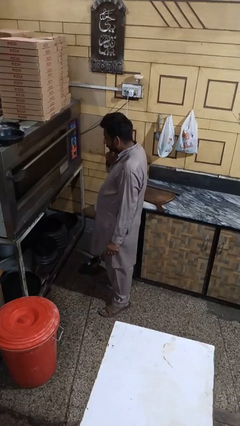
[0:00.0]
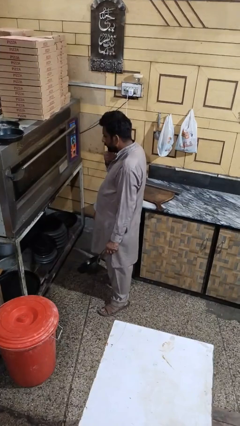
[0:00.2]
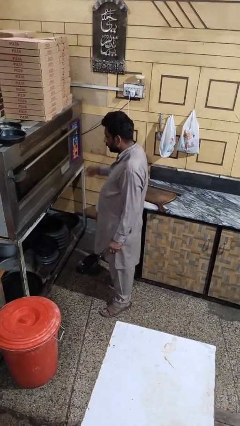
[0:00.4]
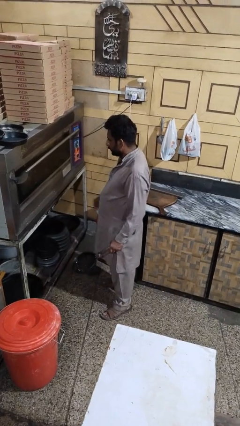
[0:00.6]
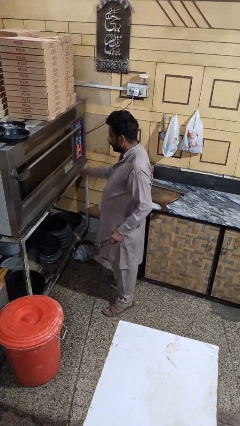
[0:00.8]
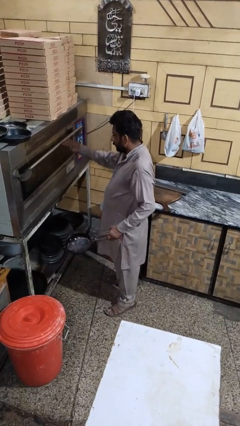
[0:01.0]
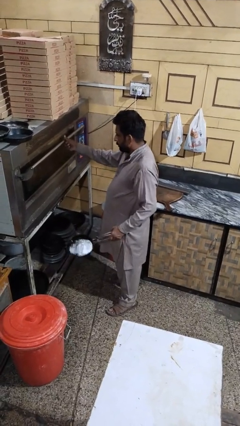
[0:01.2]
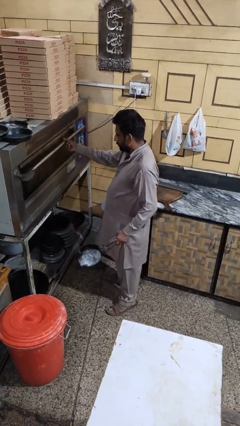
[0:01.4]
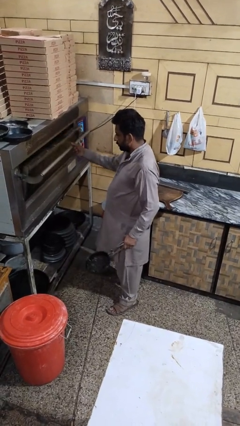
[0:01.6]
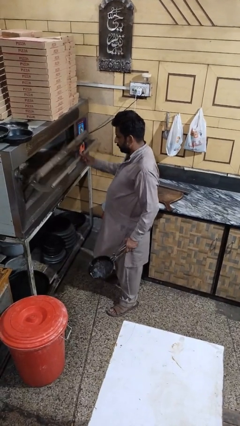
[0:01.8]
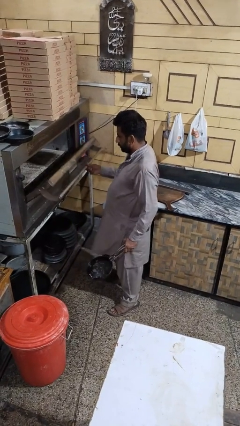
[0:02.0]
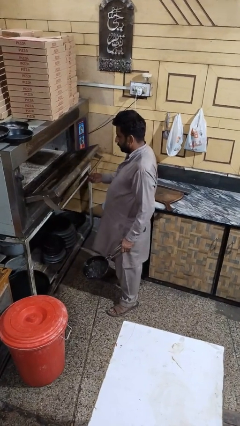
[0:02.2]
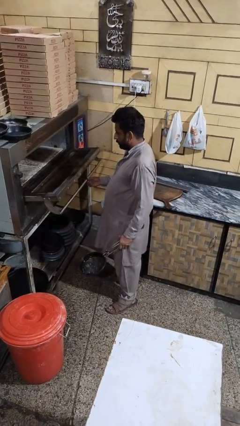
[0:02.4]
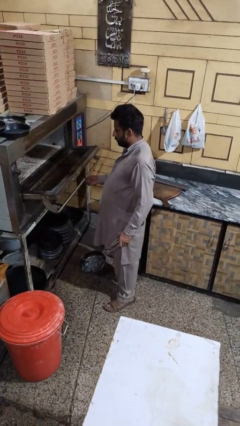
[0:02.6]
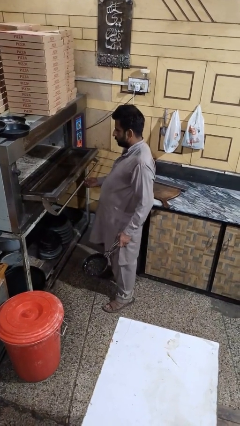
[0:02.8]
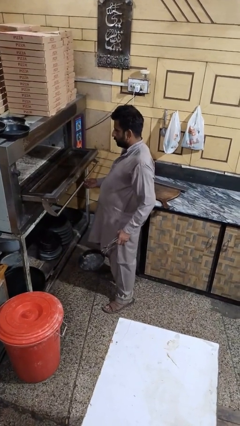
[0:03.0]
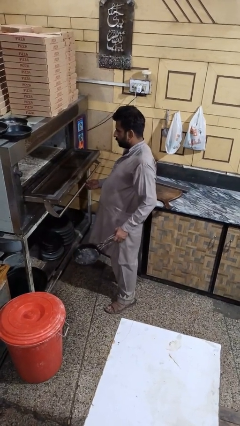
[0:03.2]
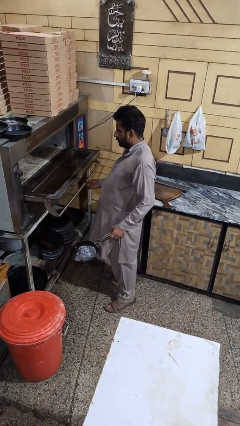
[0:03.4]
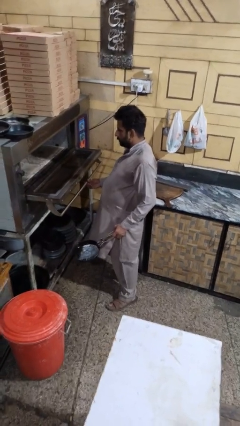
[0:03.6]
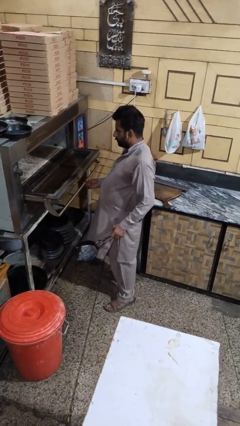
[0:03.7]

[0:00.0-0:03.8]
person opens microwave

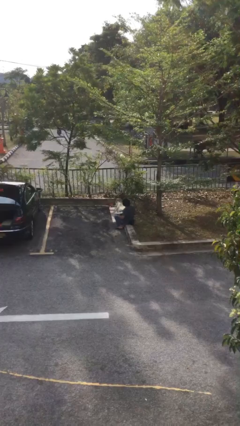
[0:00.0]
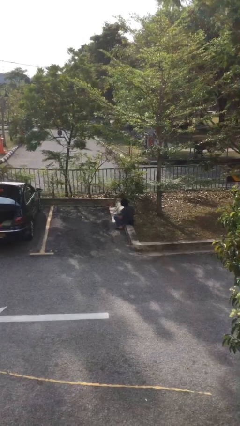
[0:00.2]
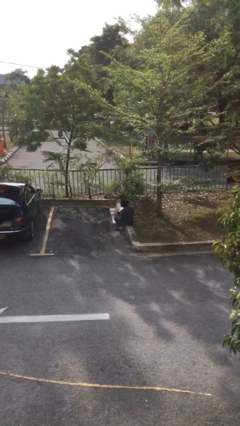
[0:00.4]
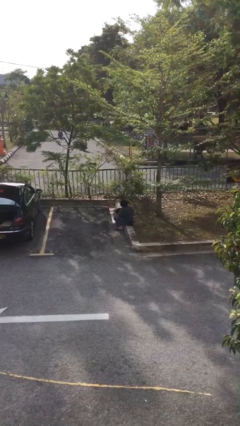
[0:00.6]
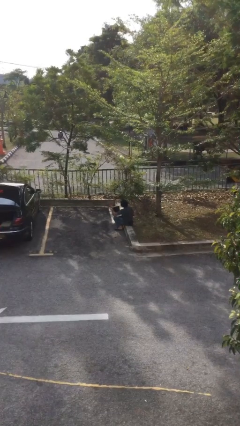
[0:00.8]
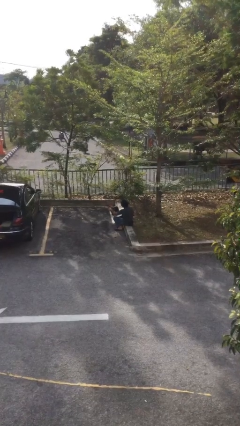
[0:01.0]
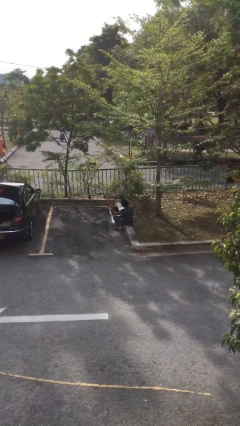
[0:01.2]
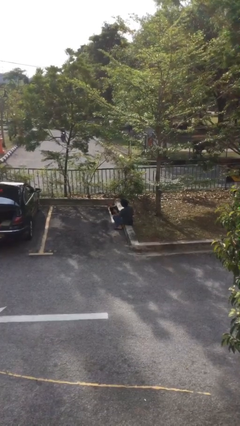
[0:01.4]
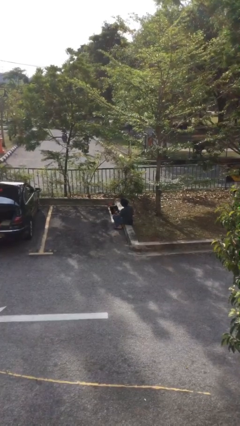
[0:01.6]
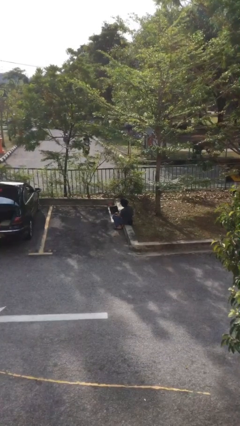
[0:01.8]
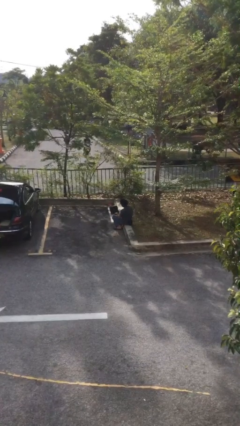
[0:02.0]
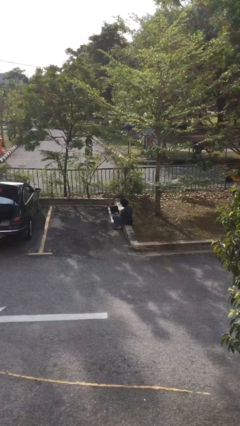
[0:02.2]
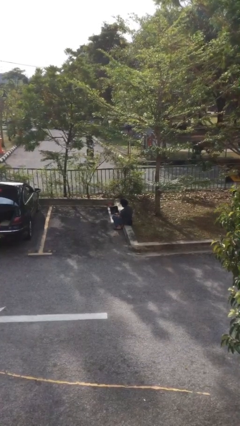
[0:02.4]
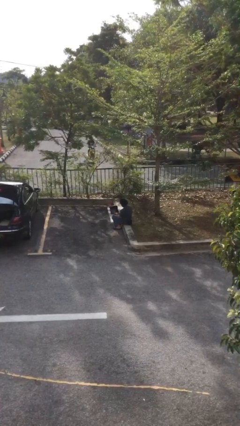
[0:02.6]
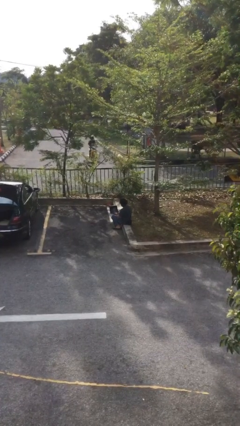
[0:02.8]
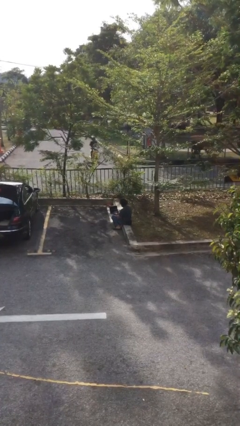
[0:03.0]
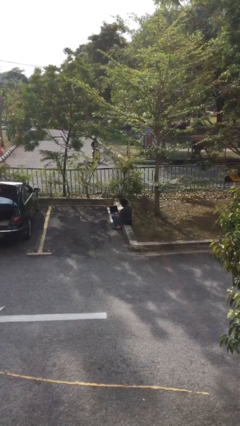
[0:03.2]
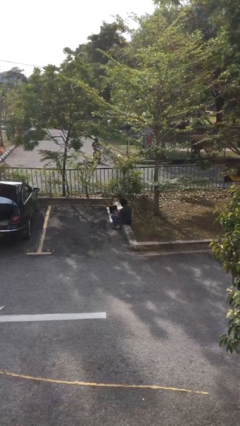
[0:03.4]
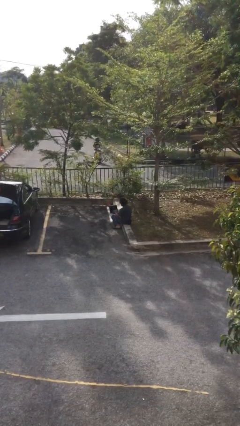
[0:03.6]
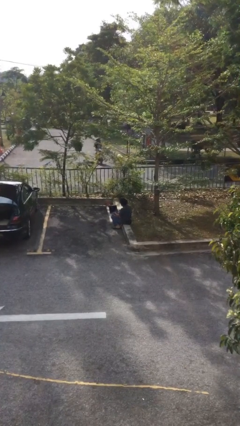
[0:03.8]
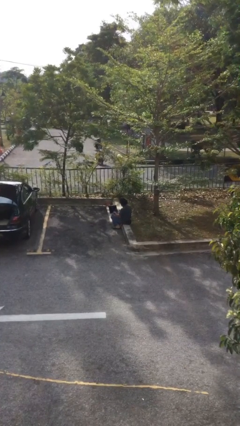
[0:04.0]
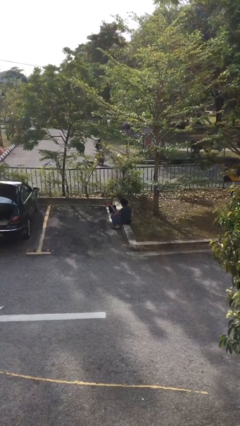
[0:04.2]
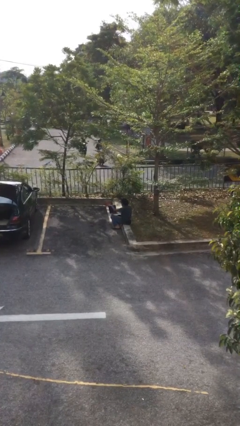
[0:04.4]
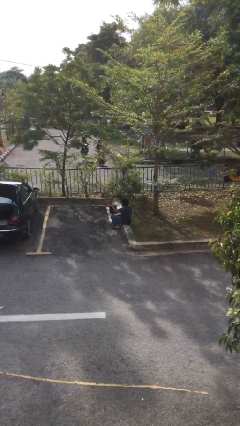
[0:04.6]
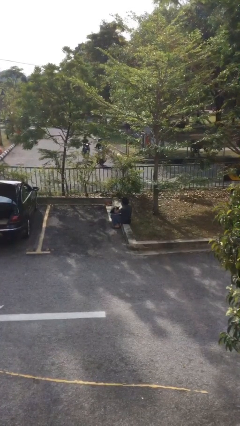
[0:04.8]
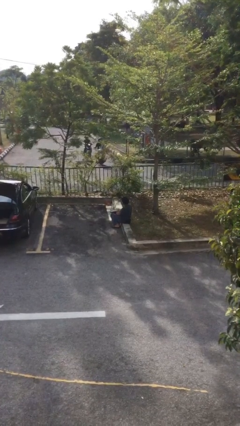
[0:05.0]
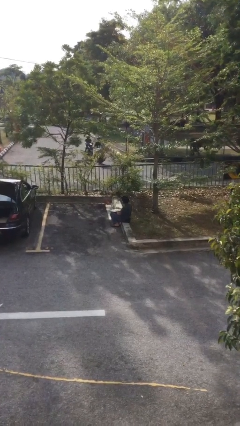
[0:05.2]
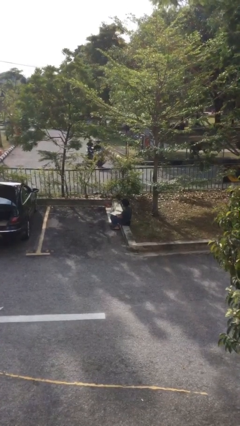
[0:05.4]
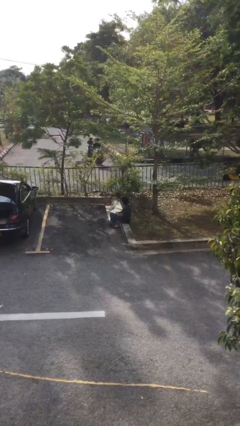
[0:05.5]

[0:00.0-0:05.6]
person interacts with laptop

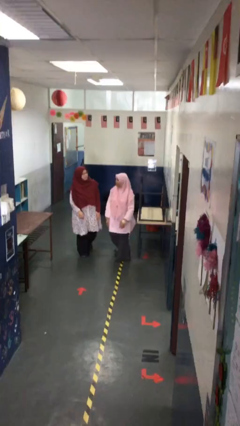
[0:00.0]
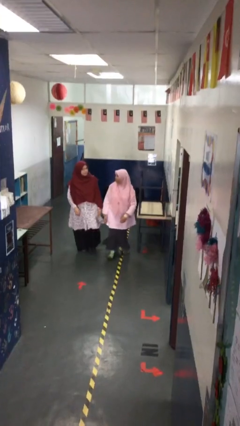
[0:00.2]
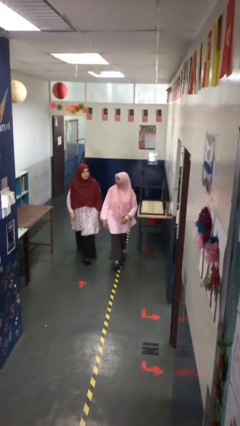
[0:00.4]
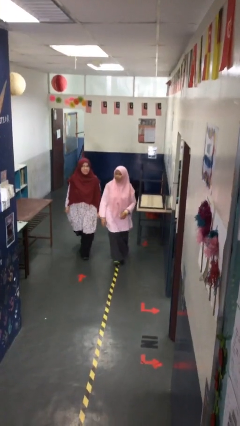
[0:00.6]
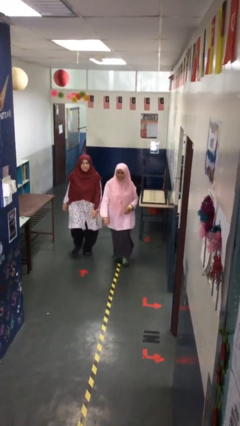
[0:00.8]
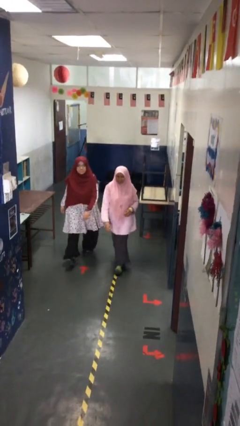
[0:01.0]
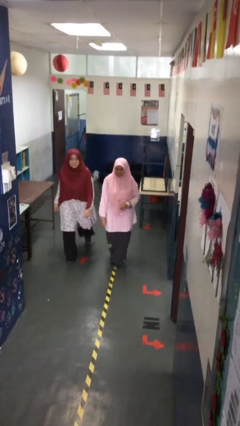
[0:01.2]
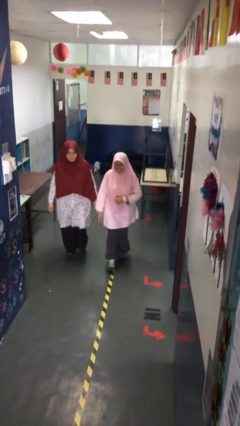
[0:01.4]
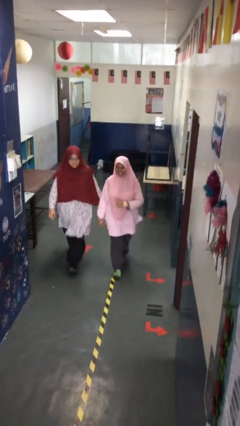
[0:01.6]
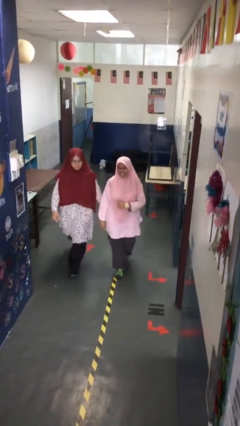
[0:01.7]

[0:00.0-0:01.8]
person talks to person

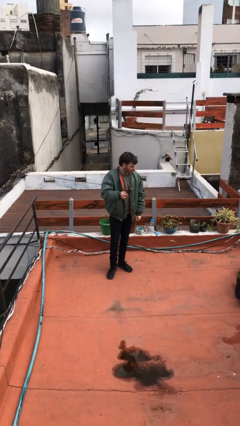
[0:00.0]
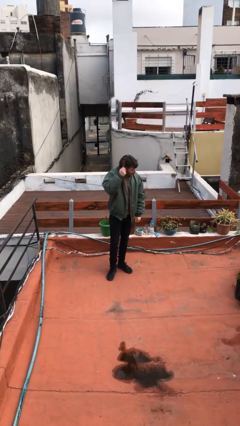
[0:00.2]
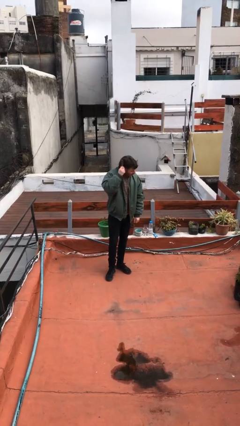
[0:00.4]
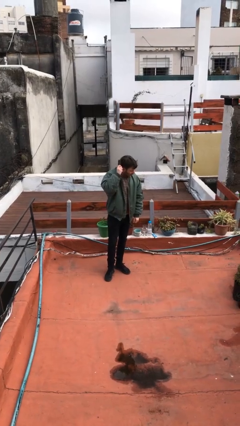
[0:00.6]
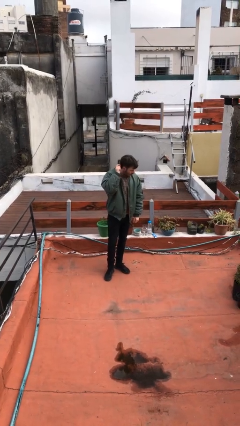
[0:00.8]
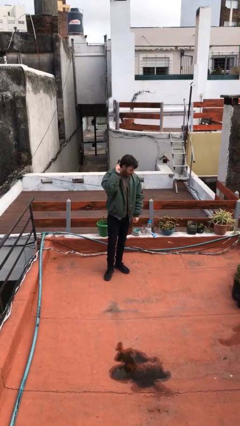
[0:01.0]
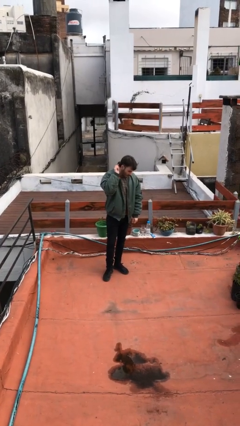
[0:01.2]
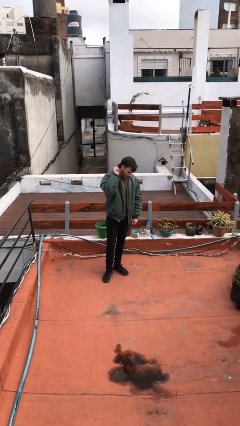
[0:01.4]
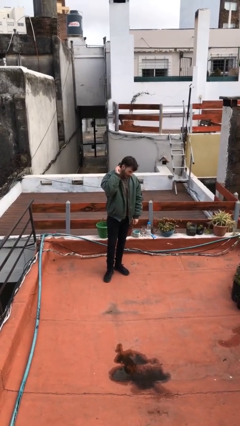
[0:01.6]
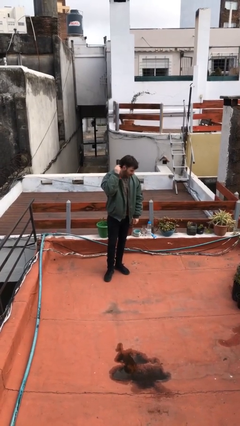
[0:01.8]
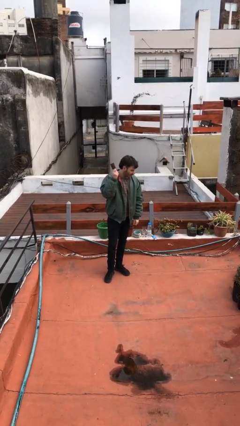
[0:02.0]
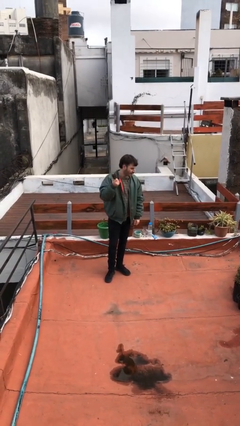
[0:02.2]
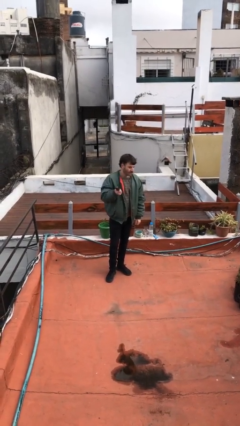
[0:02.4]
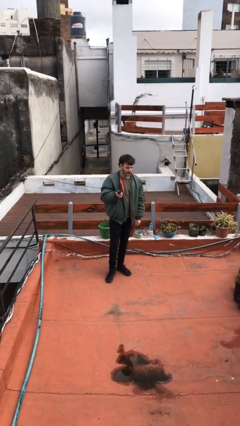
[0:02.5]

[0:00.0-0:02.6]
person brushes hair

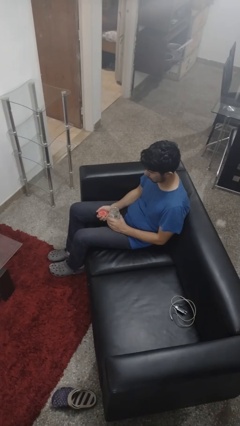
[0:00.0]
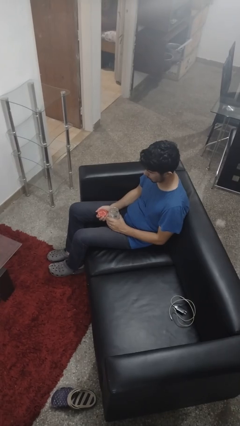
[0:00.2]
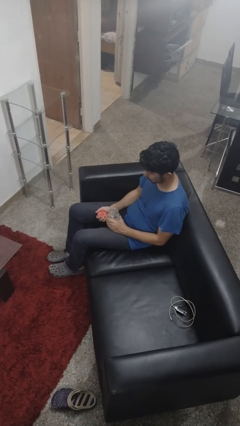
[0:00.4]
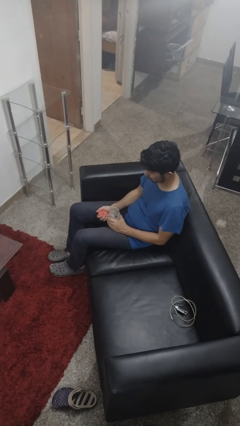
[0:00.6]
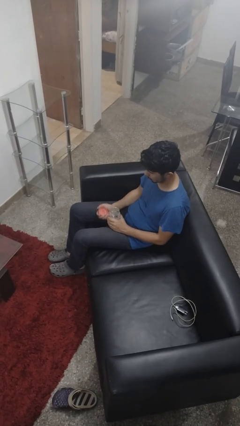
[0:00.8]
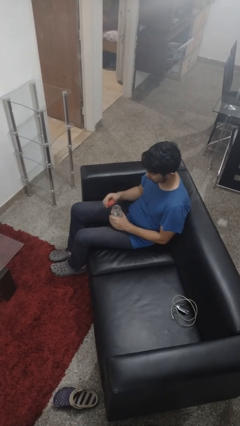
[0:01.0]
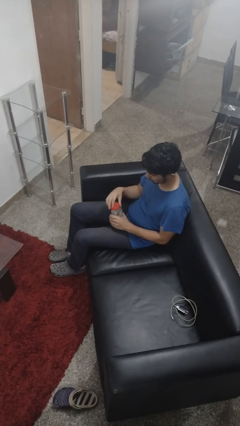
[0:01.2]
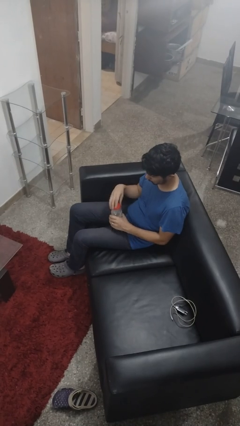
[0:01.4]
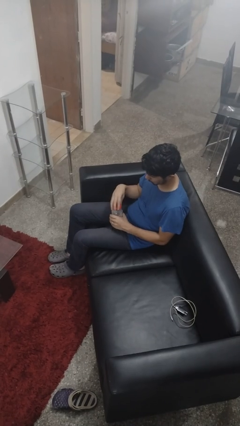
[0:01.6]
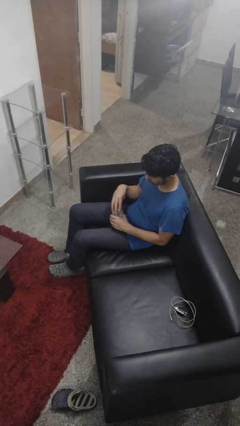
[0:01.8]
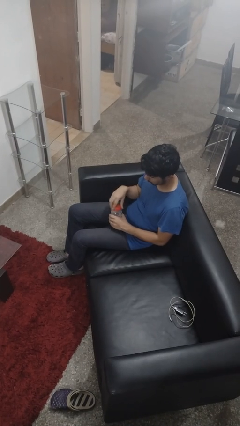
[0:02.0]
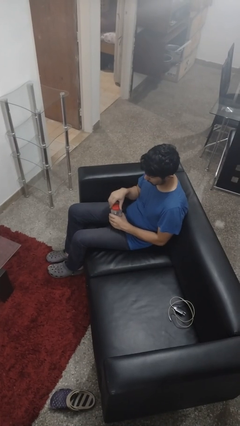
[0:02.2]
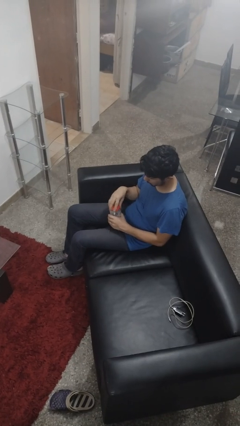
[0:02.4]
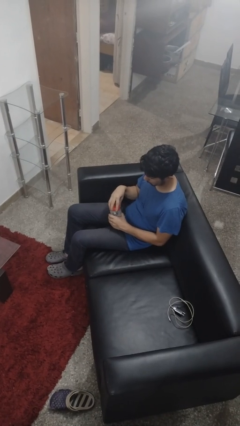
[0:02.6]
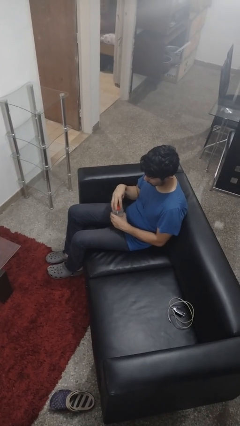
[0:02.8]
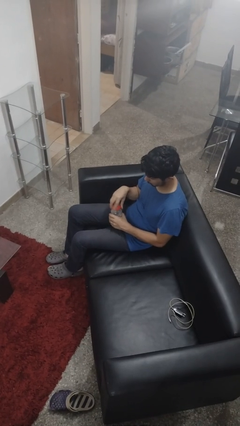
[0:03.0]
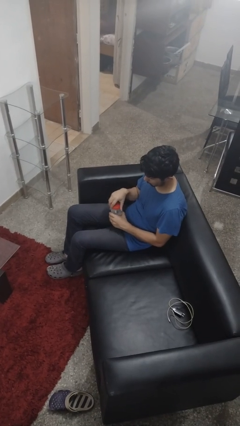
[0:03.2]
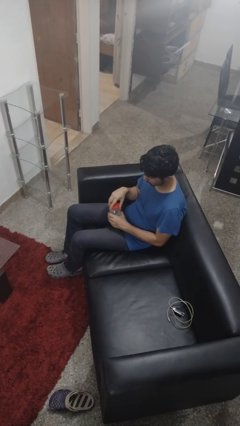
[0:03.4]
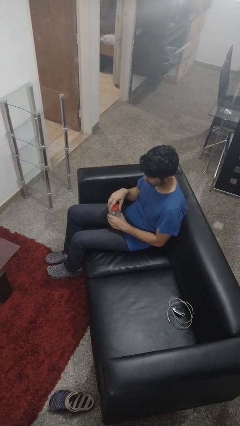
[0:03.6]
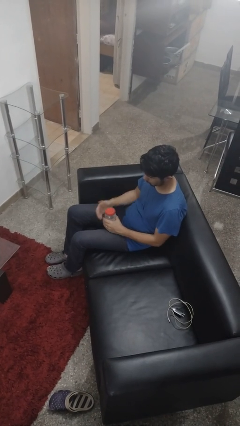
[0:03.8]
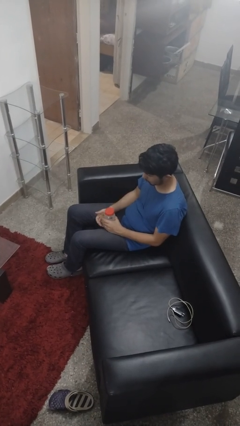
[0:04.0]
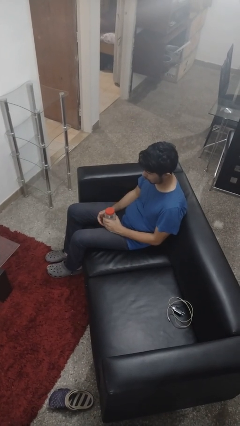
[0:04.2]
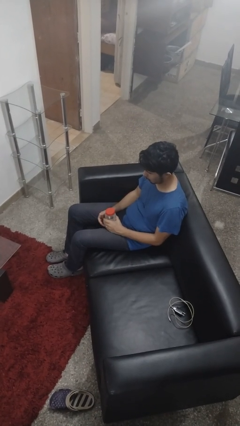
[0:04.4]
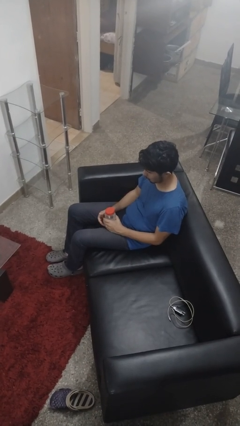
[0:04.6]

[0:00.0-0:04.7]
person closes jar
